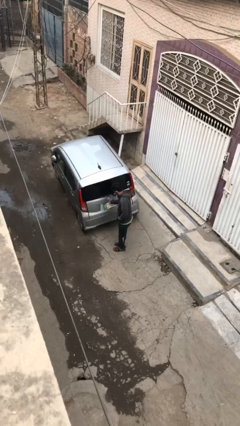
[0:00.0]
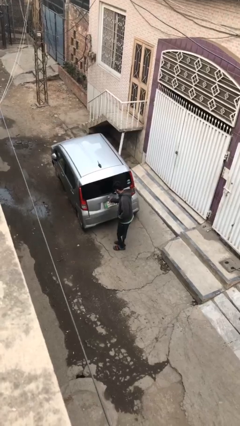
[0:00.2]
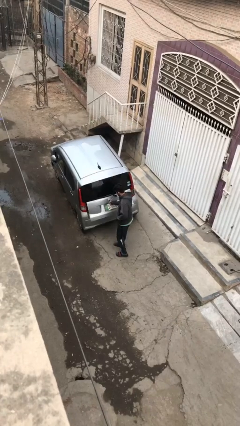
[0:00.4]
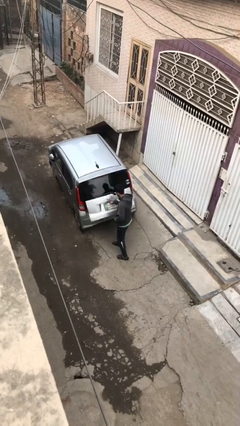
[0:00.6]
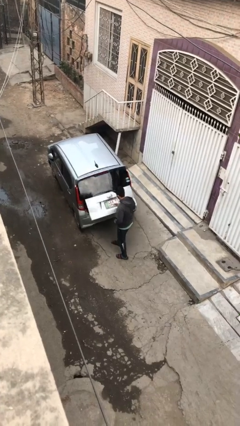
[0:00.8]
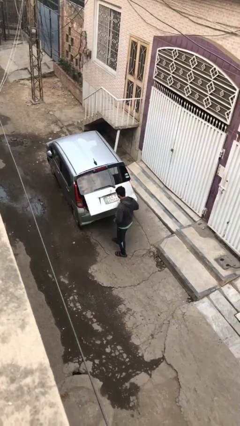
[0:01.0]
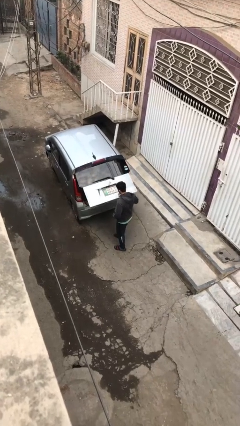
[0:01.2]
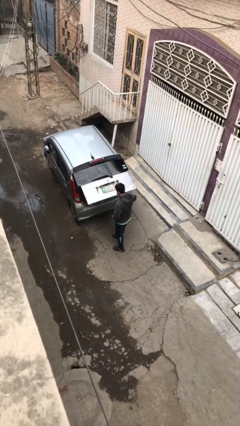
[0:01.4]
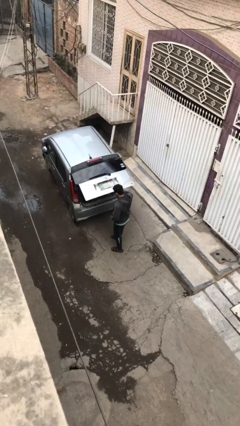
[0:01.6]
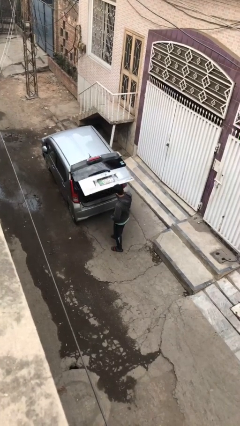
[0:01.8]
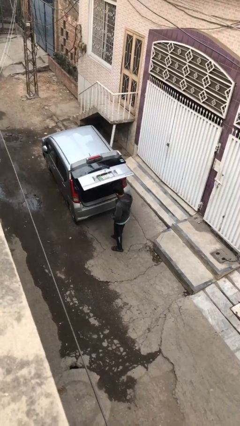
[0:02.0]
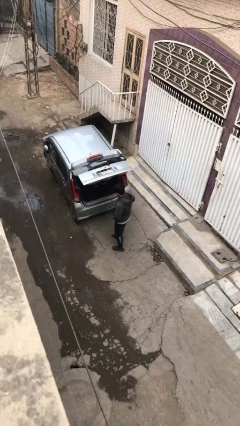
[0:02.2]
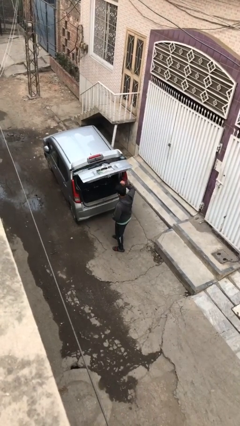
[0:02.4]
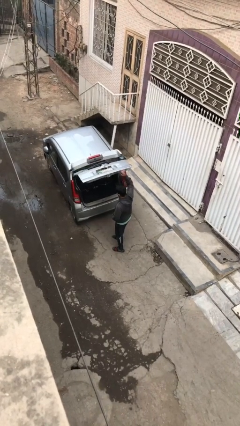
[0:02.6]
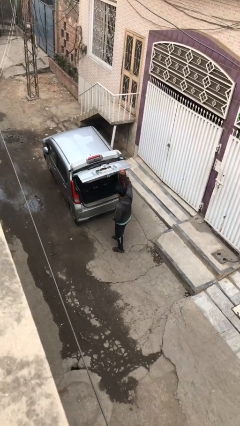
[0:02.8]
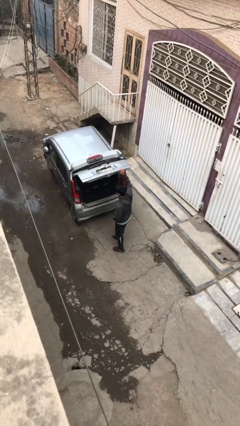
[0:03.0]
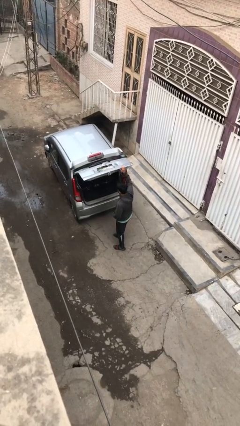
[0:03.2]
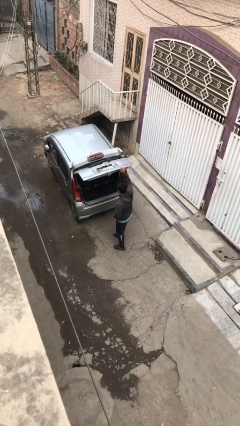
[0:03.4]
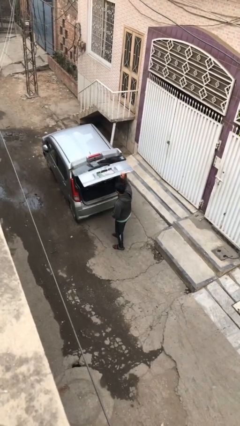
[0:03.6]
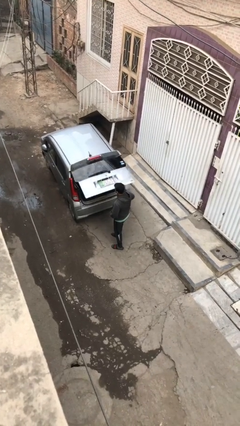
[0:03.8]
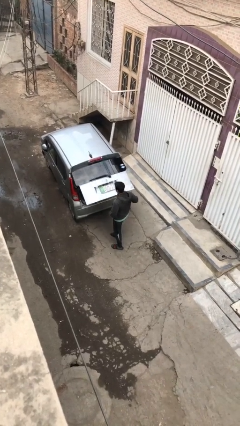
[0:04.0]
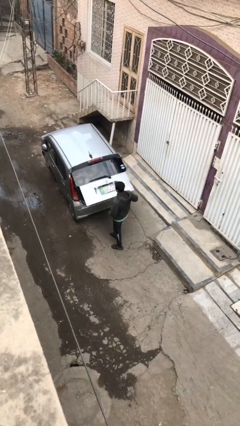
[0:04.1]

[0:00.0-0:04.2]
person opens car trunk

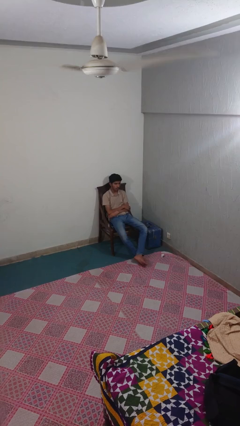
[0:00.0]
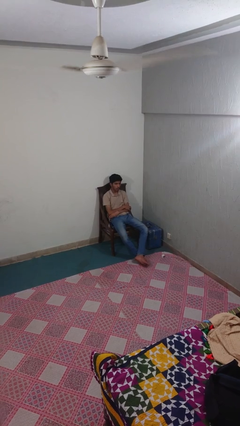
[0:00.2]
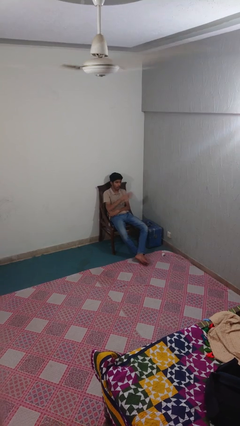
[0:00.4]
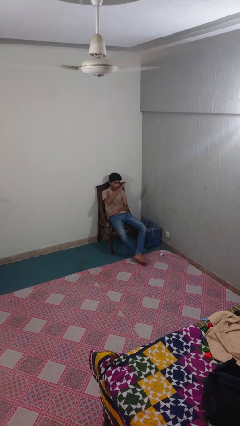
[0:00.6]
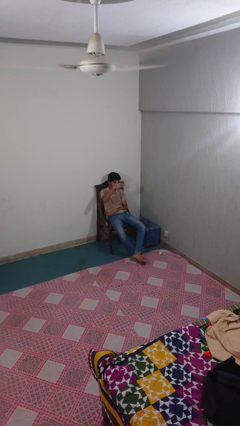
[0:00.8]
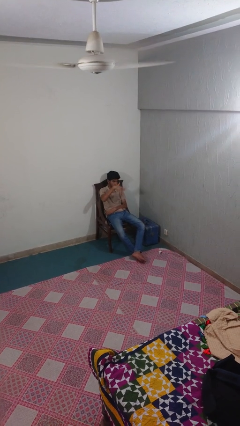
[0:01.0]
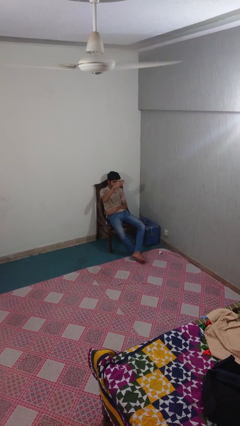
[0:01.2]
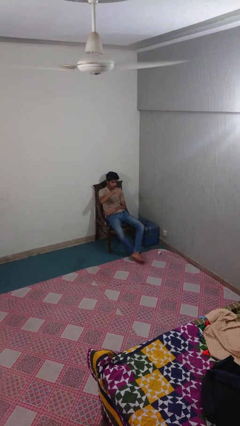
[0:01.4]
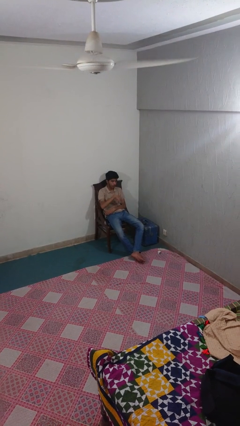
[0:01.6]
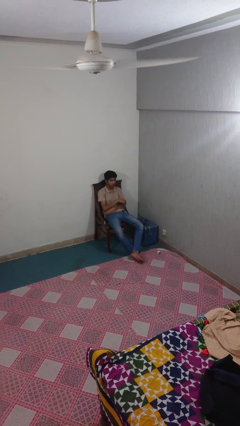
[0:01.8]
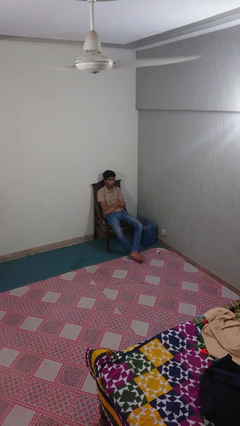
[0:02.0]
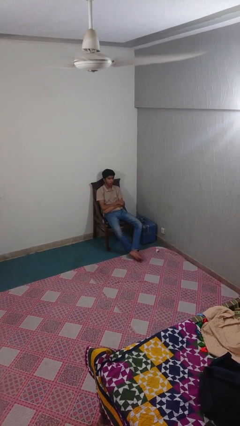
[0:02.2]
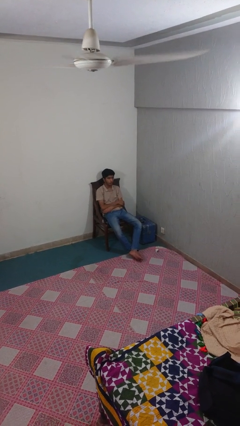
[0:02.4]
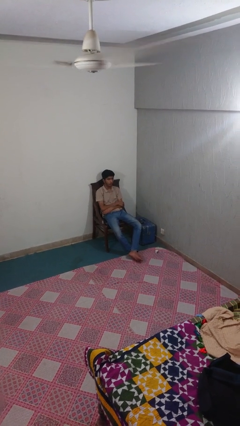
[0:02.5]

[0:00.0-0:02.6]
person gestures come here

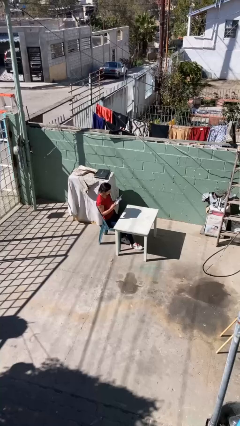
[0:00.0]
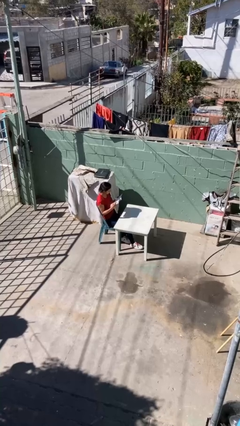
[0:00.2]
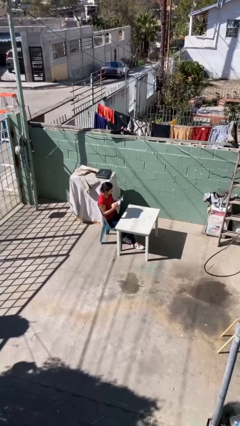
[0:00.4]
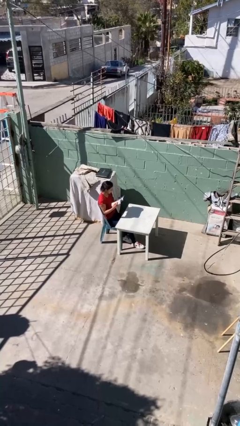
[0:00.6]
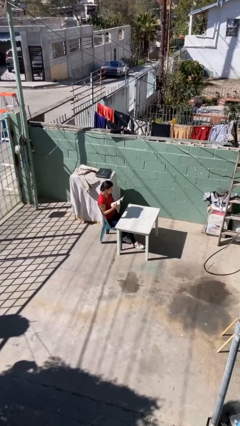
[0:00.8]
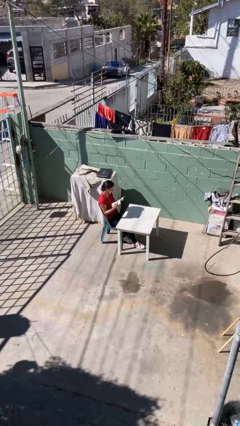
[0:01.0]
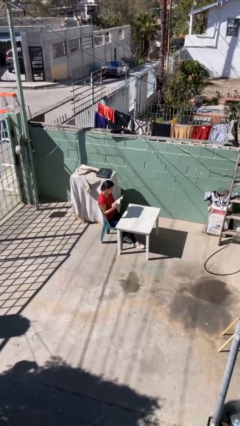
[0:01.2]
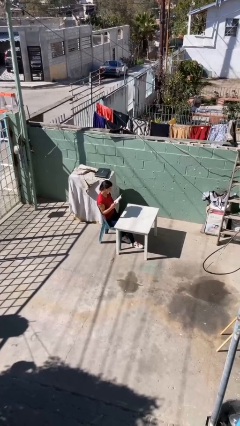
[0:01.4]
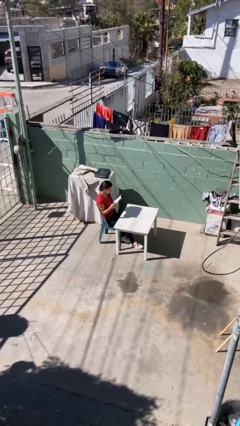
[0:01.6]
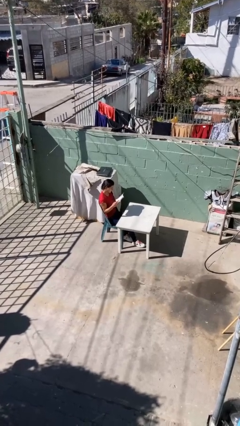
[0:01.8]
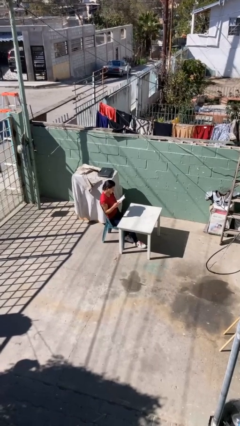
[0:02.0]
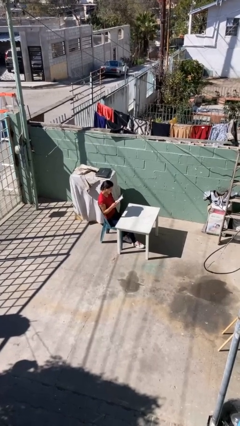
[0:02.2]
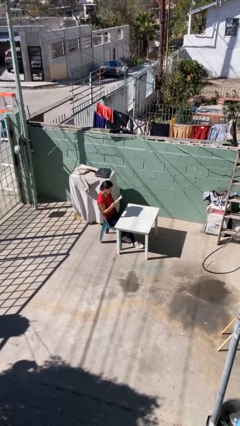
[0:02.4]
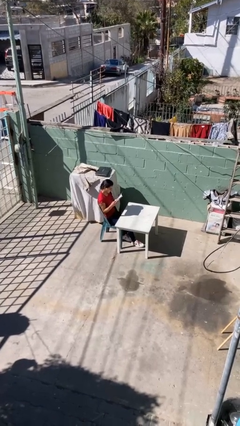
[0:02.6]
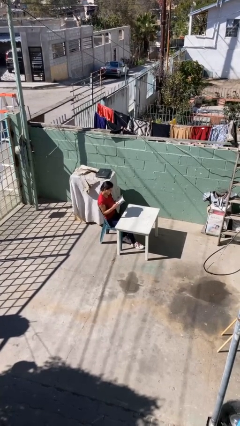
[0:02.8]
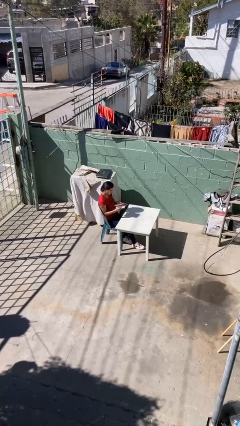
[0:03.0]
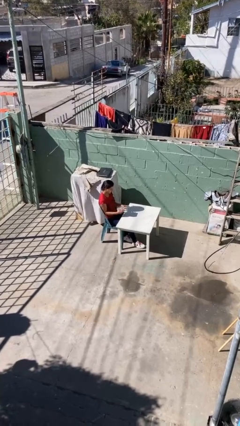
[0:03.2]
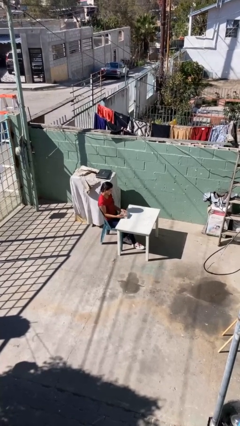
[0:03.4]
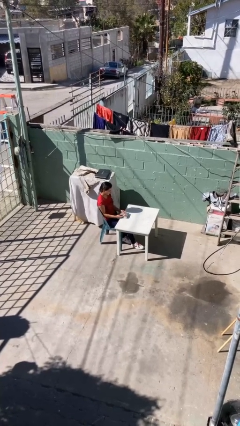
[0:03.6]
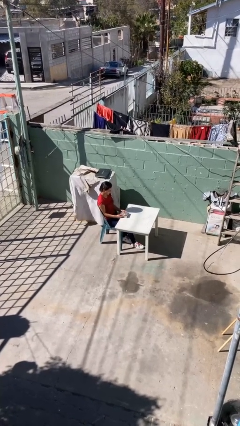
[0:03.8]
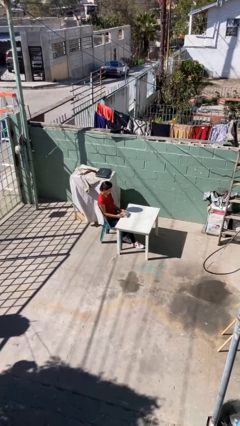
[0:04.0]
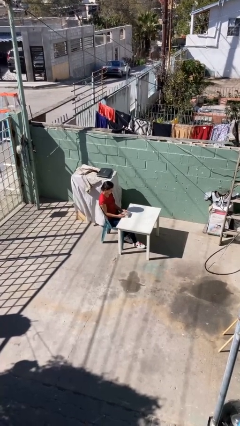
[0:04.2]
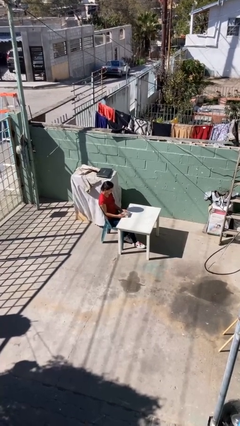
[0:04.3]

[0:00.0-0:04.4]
person reads document

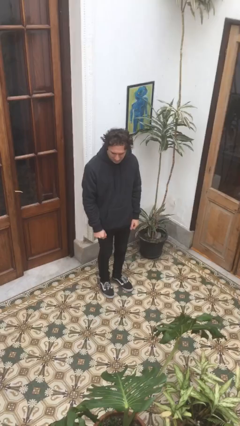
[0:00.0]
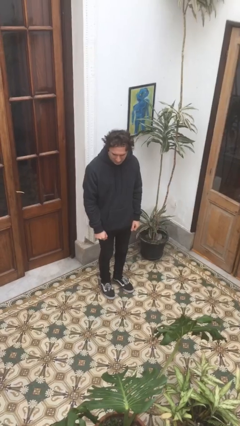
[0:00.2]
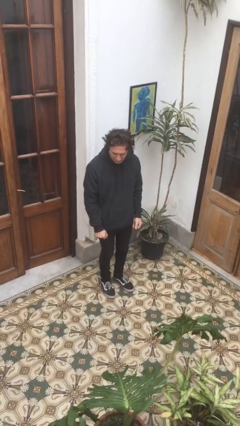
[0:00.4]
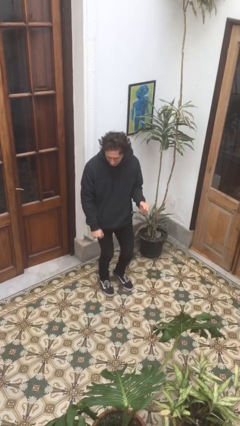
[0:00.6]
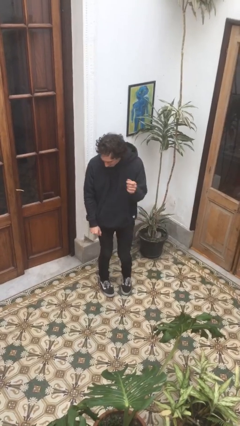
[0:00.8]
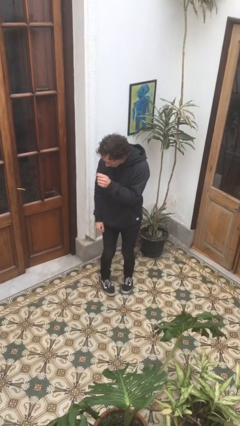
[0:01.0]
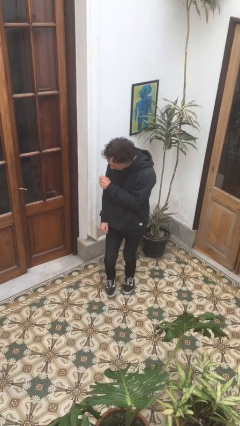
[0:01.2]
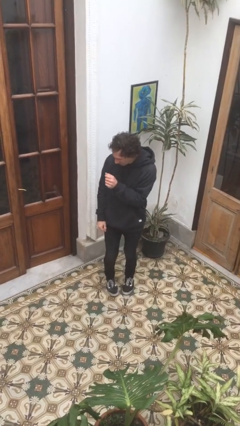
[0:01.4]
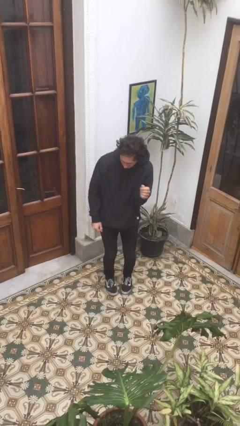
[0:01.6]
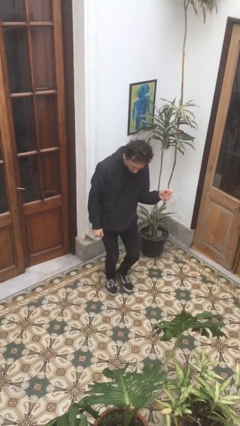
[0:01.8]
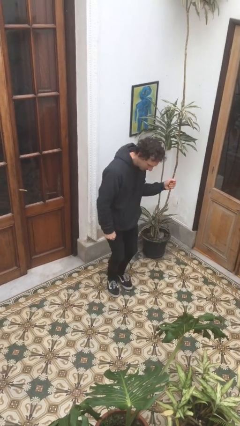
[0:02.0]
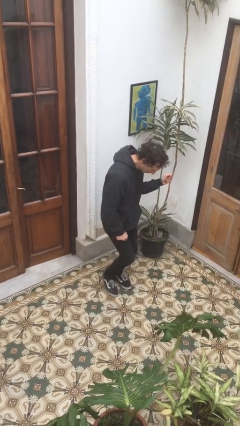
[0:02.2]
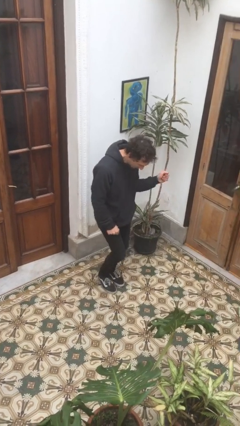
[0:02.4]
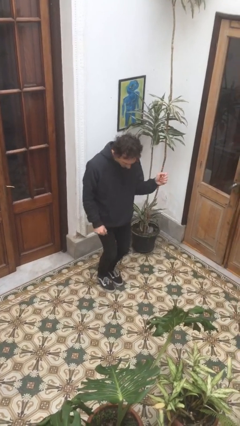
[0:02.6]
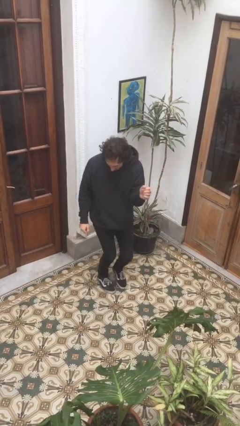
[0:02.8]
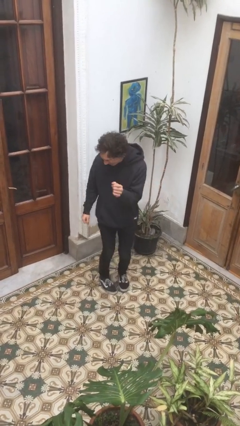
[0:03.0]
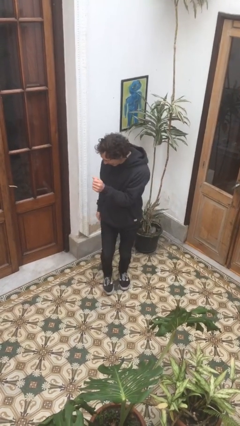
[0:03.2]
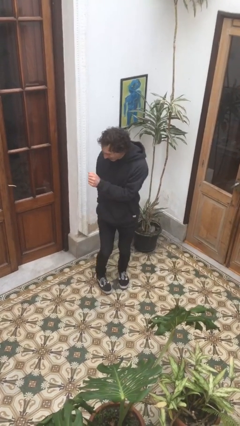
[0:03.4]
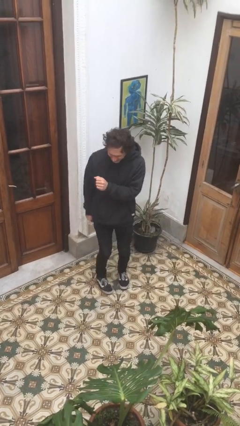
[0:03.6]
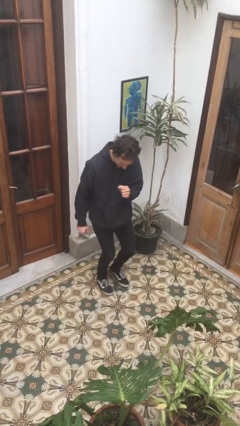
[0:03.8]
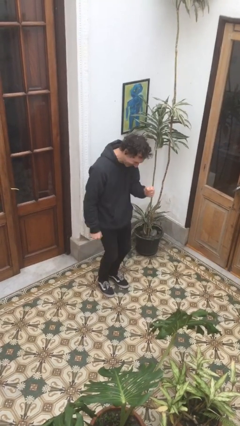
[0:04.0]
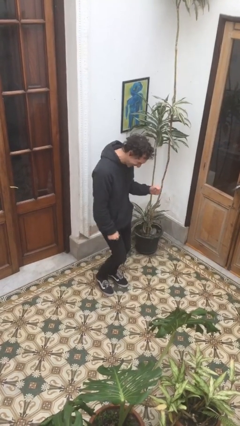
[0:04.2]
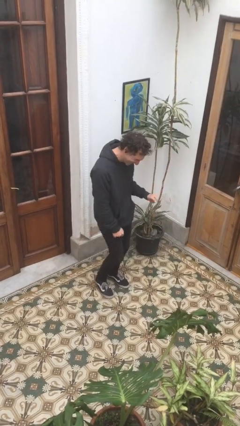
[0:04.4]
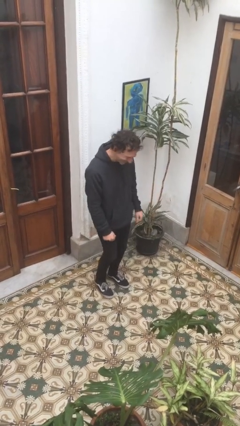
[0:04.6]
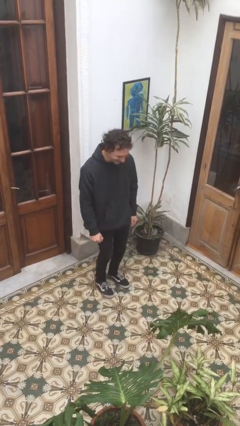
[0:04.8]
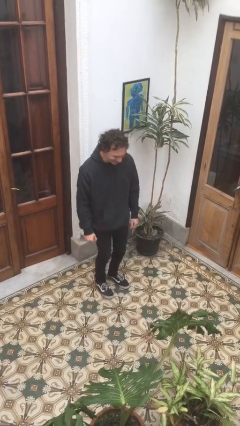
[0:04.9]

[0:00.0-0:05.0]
person dances in place

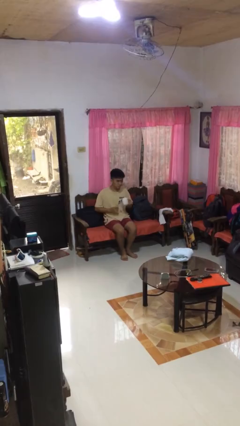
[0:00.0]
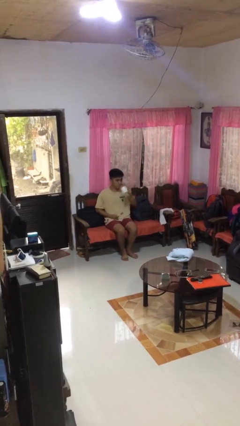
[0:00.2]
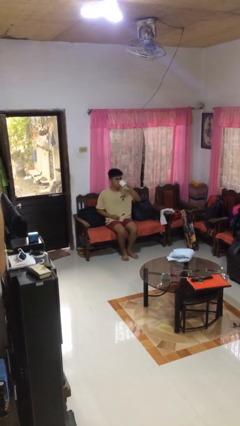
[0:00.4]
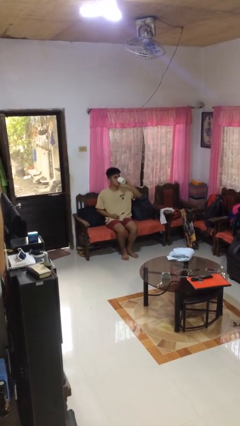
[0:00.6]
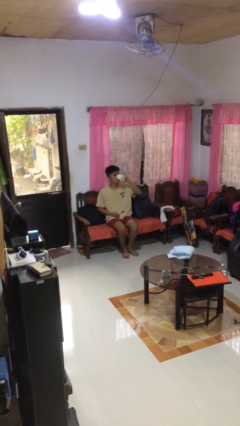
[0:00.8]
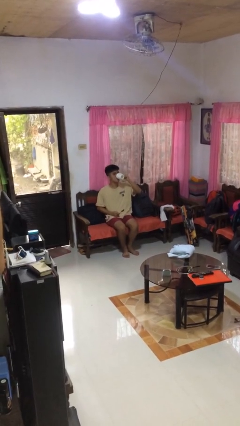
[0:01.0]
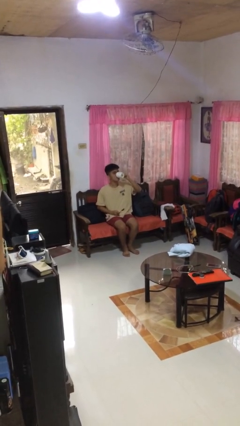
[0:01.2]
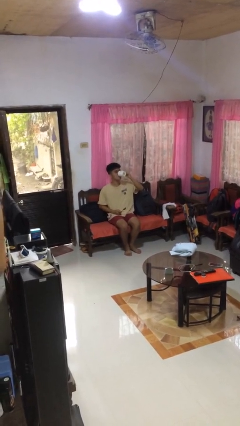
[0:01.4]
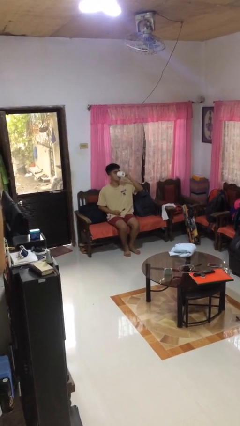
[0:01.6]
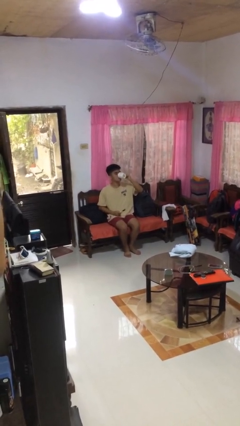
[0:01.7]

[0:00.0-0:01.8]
person drinks from mug
